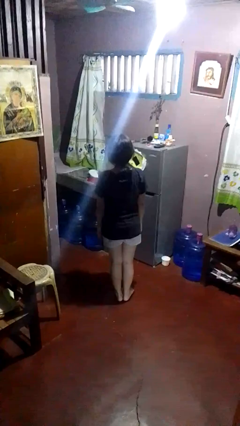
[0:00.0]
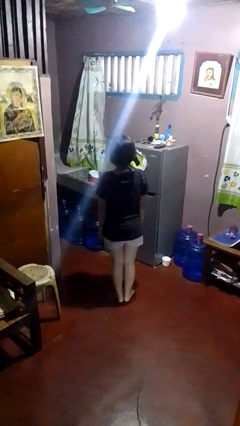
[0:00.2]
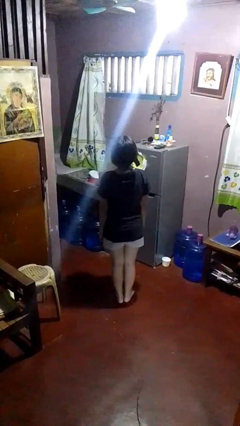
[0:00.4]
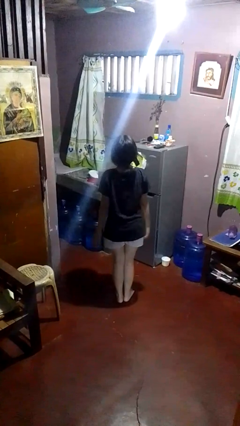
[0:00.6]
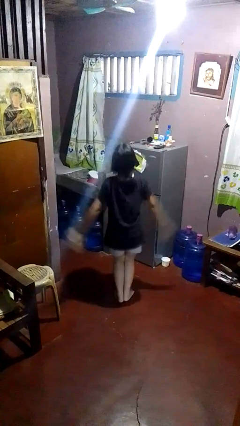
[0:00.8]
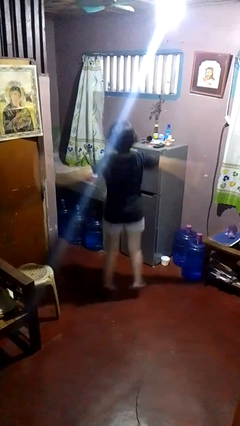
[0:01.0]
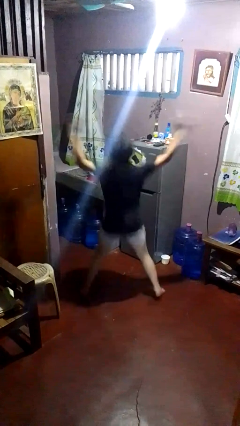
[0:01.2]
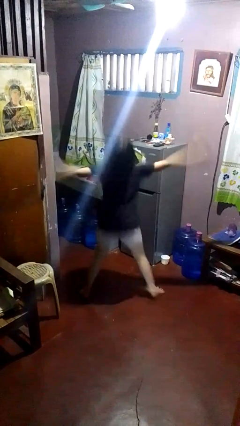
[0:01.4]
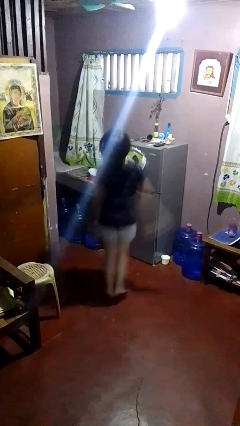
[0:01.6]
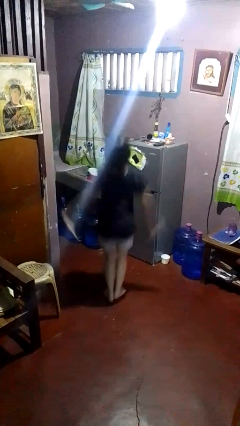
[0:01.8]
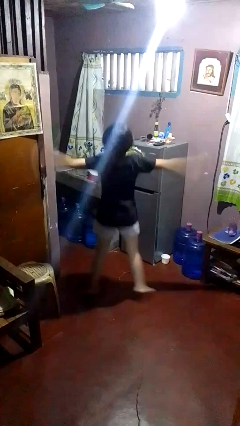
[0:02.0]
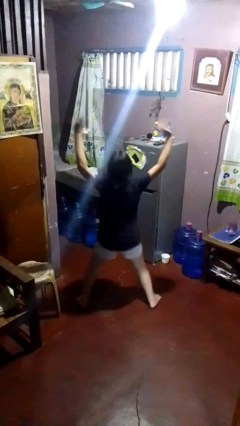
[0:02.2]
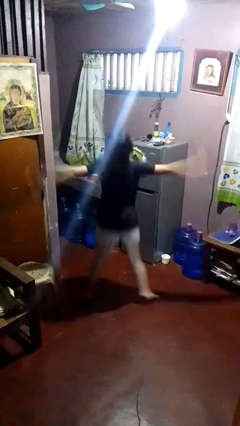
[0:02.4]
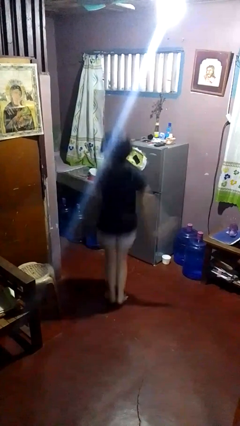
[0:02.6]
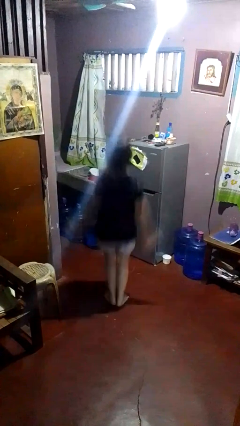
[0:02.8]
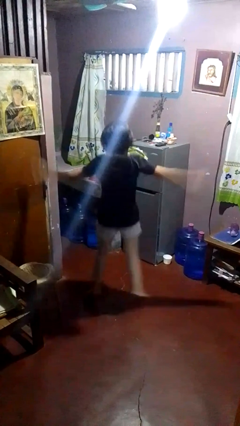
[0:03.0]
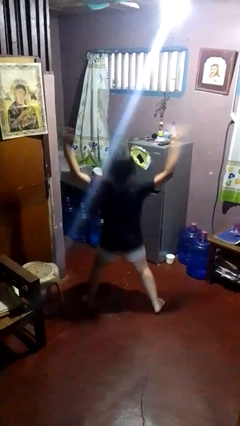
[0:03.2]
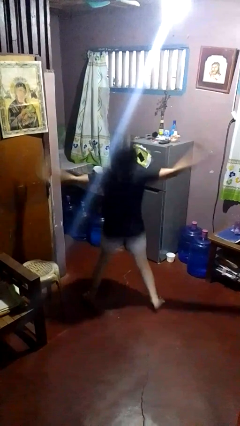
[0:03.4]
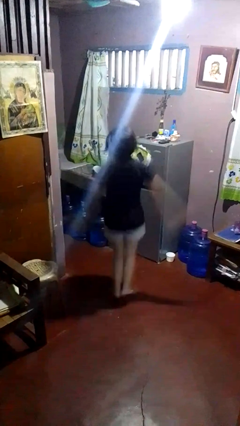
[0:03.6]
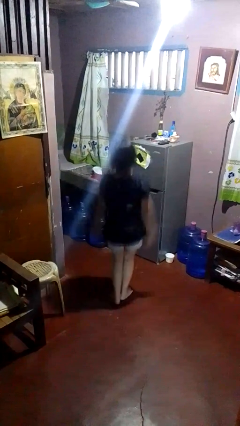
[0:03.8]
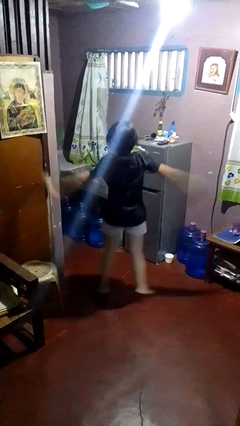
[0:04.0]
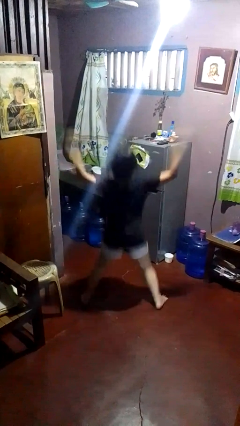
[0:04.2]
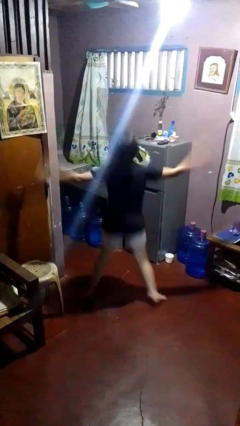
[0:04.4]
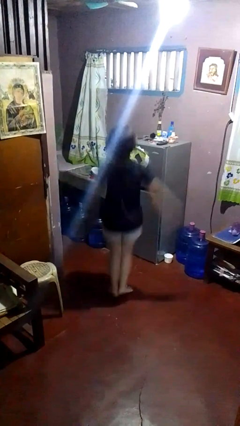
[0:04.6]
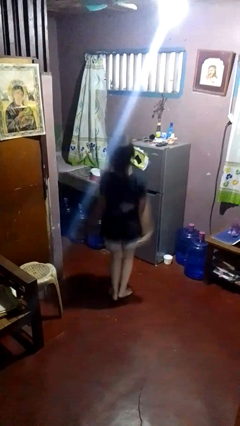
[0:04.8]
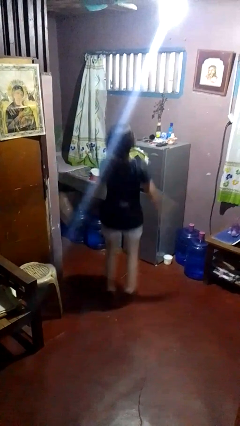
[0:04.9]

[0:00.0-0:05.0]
person exercises with jumping jacks

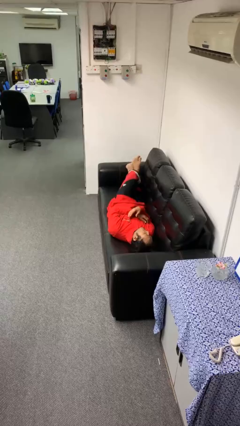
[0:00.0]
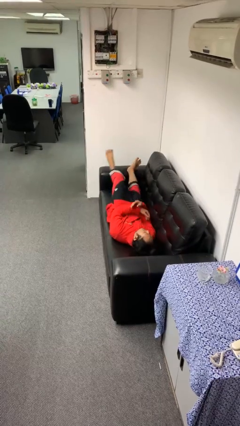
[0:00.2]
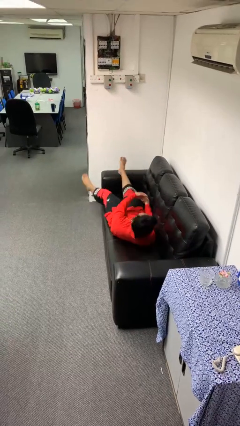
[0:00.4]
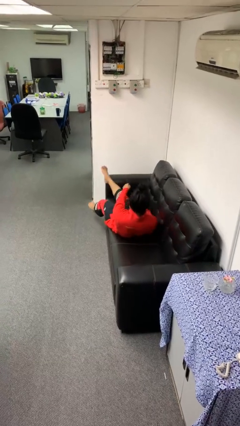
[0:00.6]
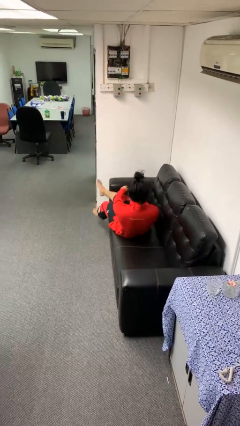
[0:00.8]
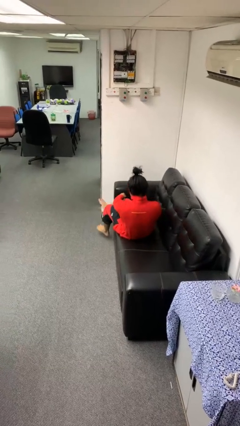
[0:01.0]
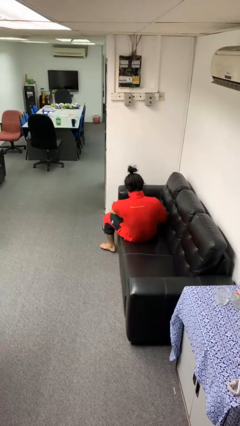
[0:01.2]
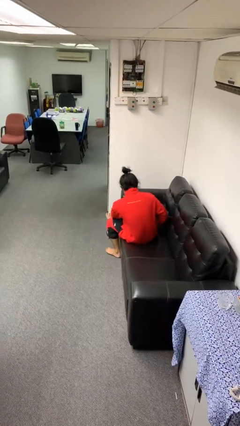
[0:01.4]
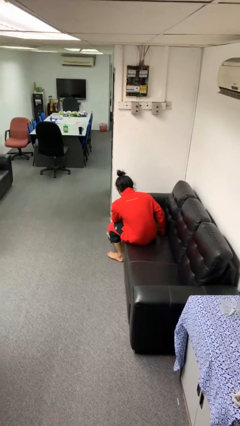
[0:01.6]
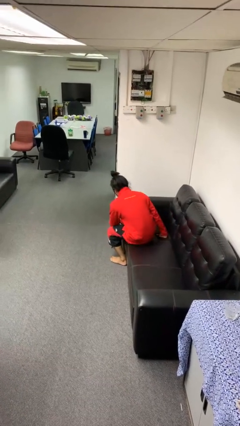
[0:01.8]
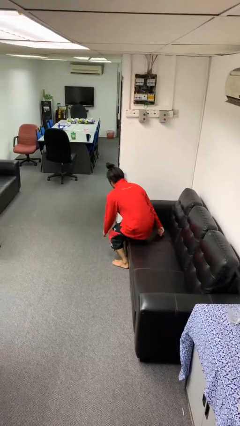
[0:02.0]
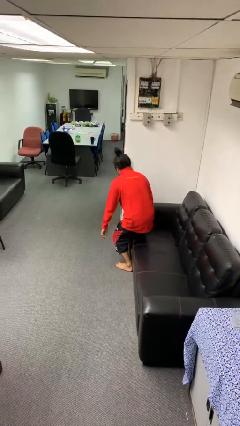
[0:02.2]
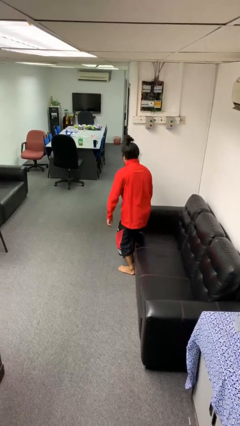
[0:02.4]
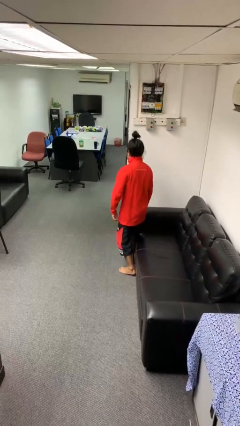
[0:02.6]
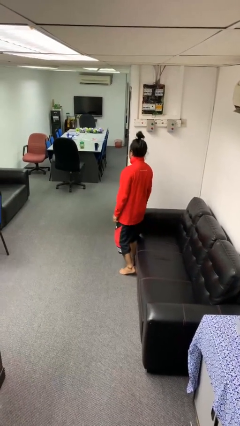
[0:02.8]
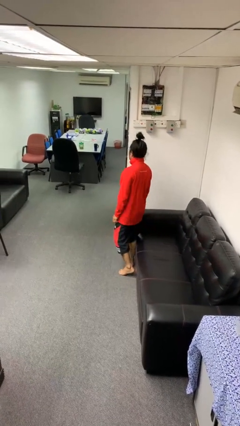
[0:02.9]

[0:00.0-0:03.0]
person stands up

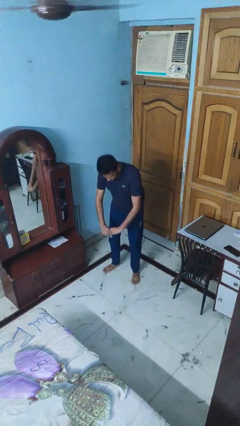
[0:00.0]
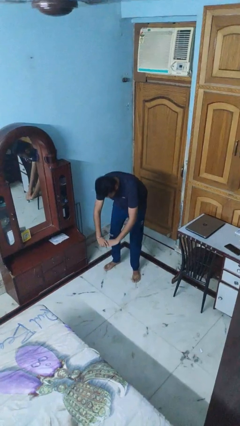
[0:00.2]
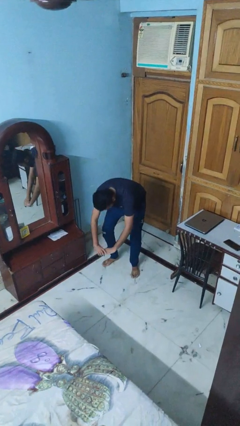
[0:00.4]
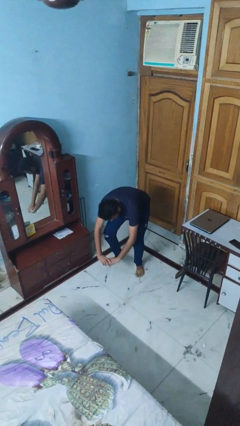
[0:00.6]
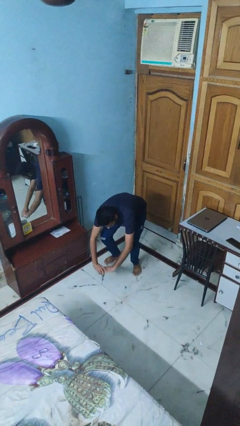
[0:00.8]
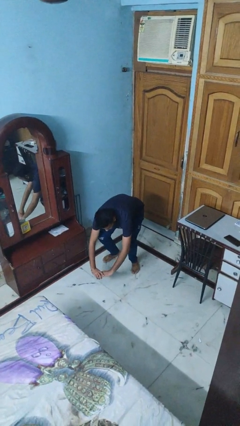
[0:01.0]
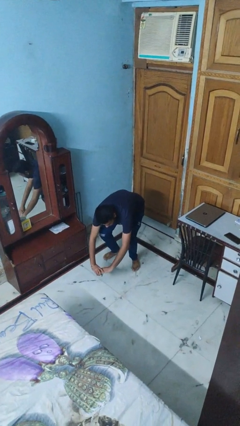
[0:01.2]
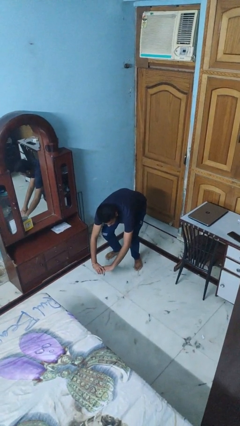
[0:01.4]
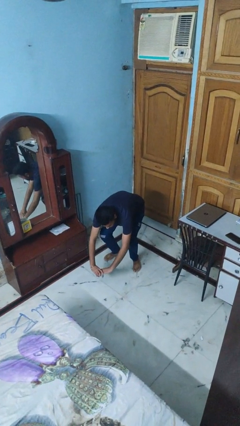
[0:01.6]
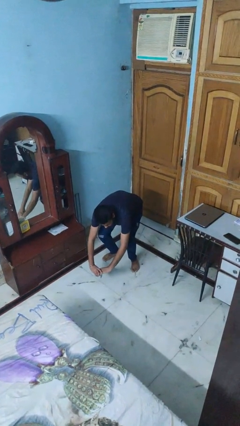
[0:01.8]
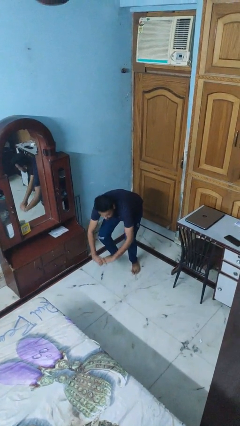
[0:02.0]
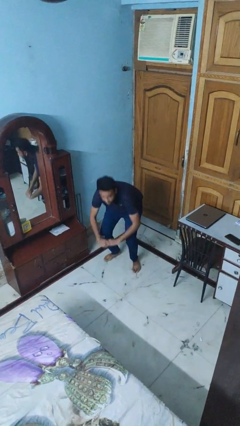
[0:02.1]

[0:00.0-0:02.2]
person squats

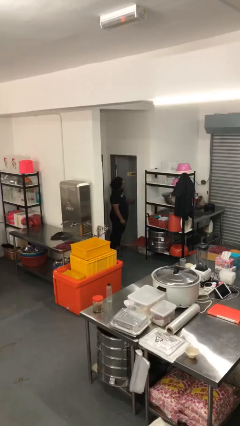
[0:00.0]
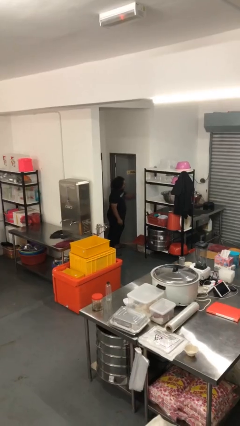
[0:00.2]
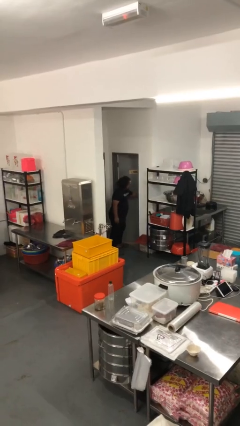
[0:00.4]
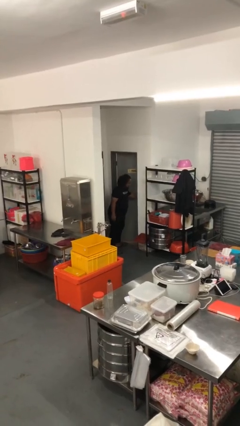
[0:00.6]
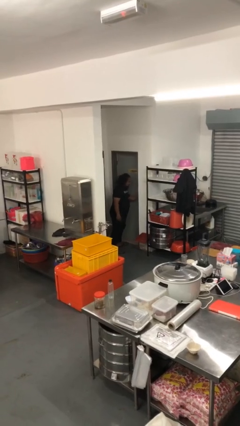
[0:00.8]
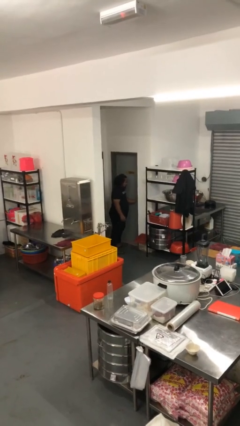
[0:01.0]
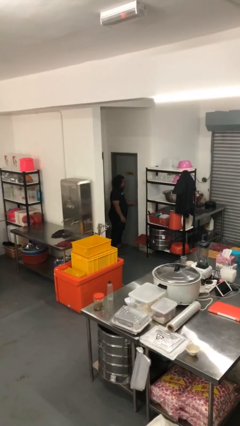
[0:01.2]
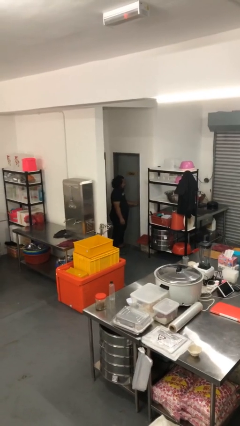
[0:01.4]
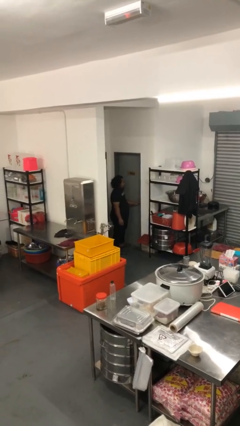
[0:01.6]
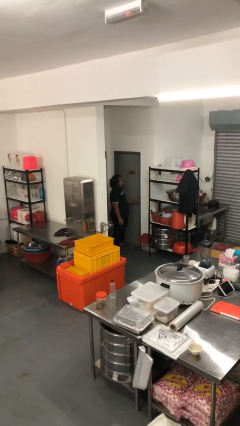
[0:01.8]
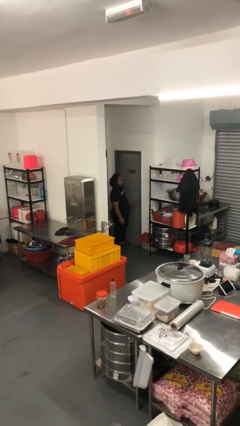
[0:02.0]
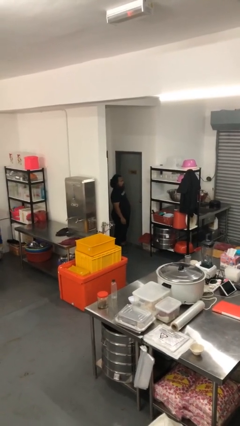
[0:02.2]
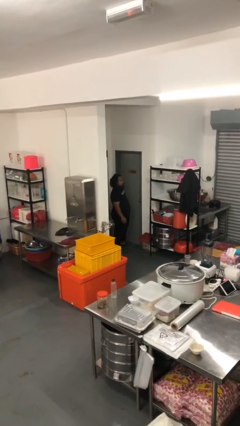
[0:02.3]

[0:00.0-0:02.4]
person closes facility door

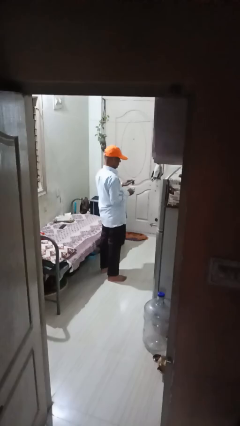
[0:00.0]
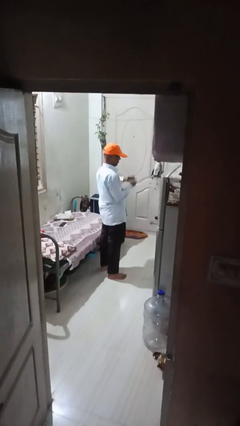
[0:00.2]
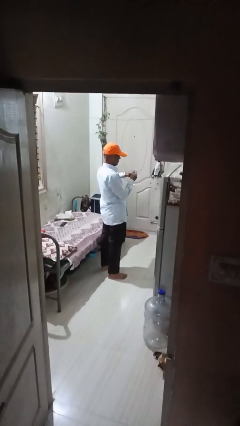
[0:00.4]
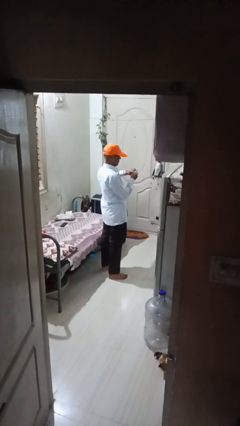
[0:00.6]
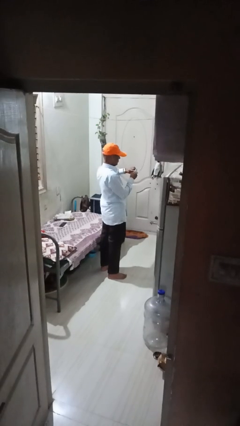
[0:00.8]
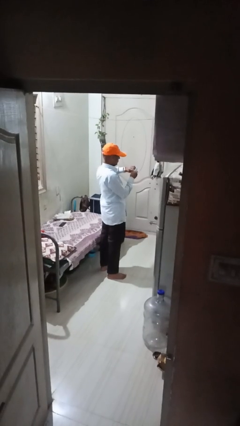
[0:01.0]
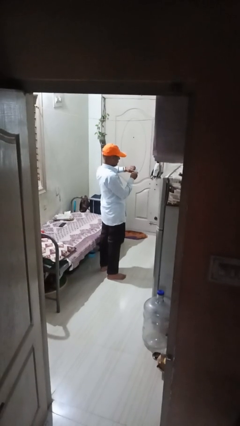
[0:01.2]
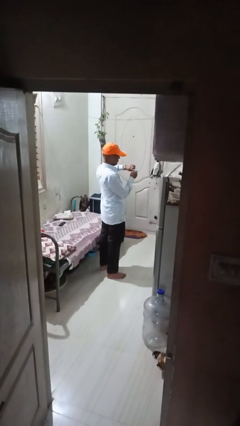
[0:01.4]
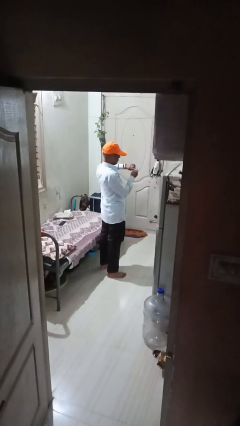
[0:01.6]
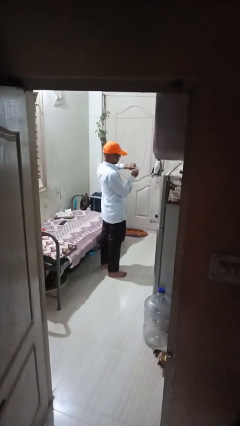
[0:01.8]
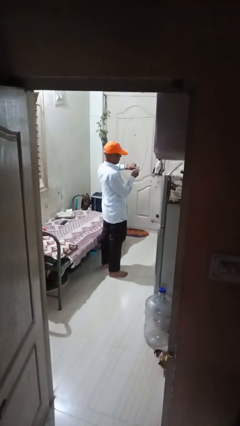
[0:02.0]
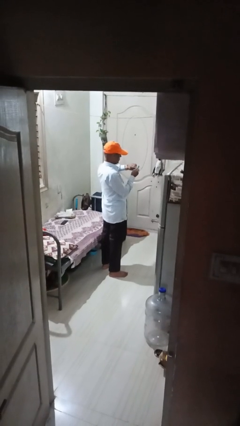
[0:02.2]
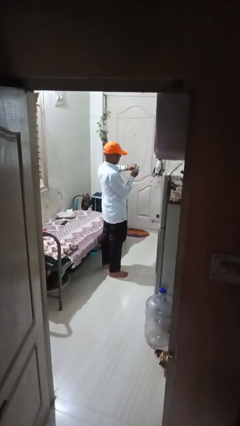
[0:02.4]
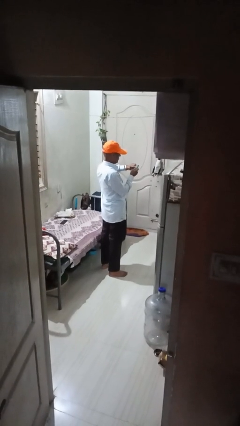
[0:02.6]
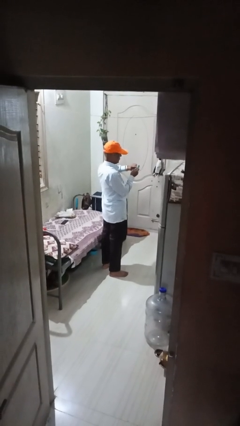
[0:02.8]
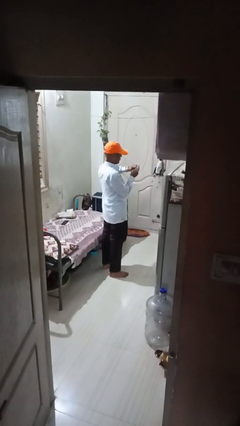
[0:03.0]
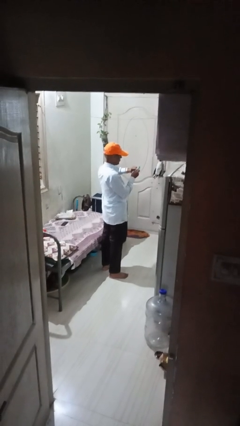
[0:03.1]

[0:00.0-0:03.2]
person files fingernails

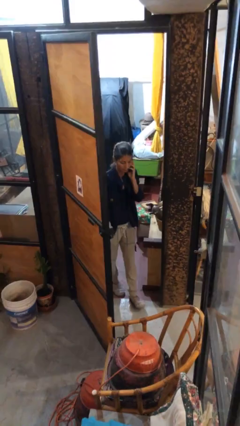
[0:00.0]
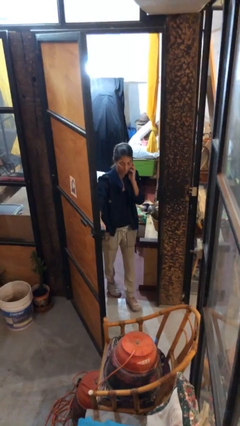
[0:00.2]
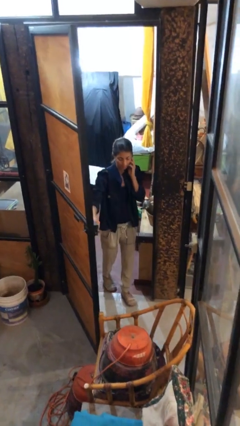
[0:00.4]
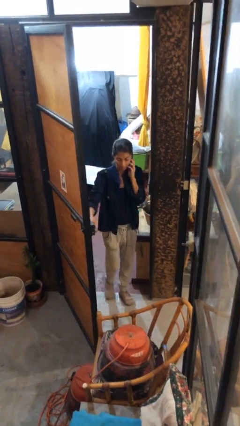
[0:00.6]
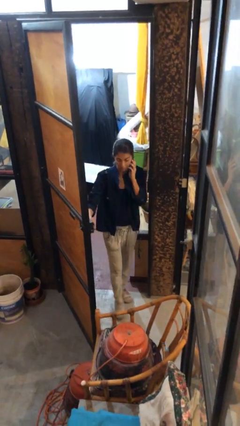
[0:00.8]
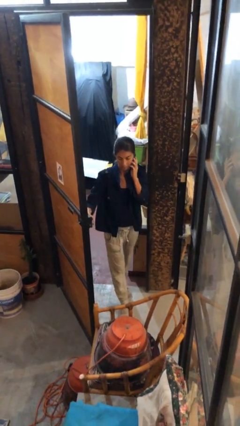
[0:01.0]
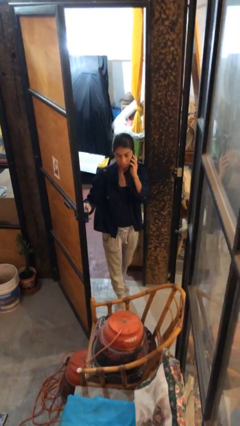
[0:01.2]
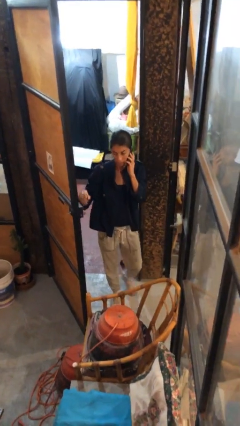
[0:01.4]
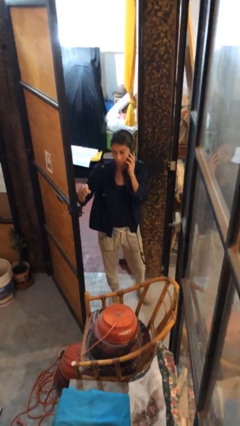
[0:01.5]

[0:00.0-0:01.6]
person enters scene through structure
